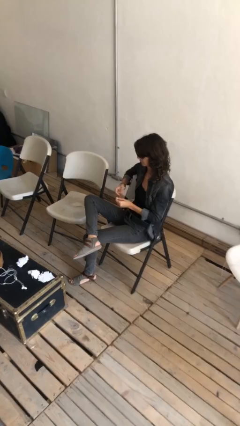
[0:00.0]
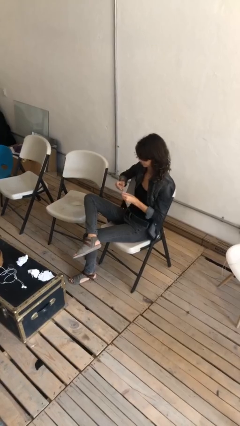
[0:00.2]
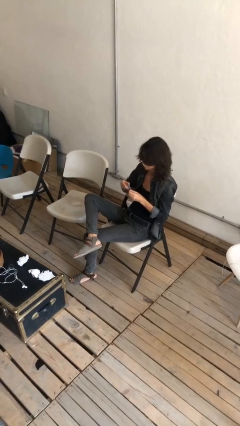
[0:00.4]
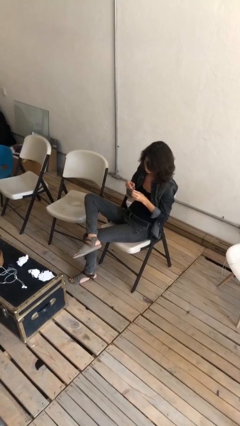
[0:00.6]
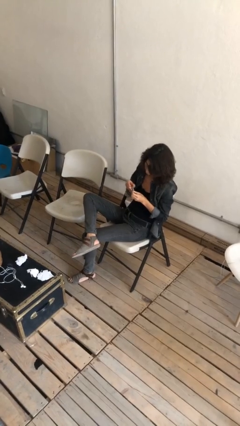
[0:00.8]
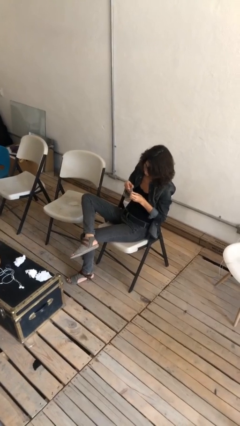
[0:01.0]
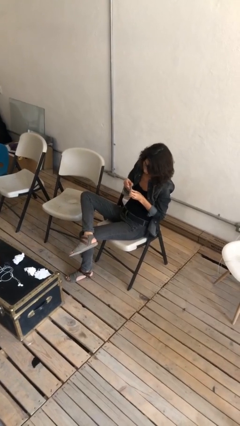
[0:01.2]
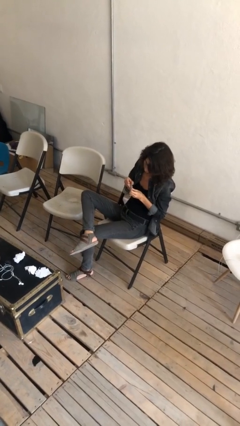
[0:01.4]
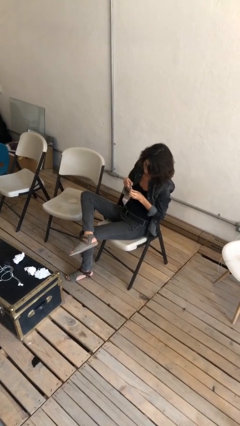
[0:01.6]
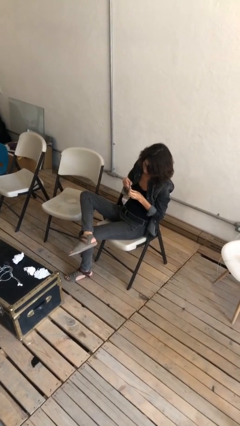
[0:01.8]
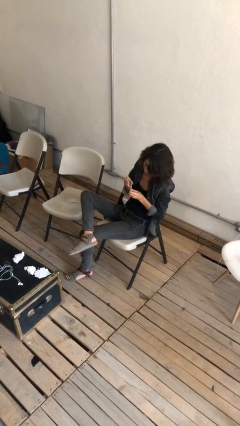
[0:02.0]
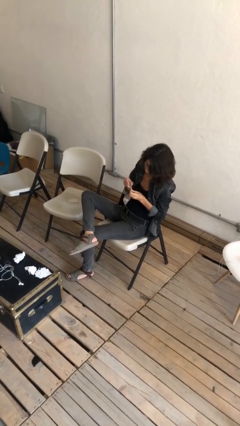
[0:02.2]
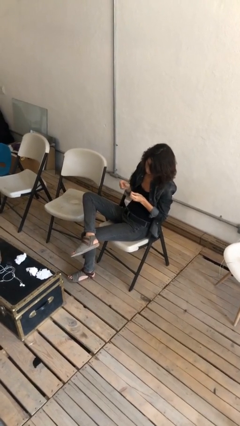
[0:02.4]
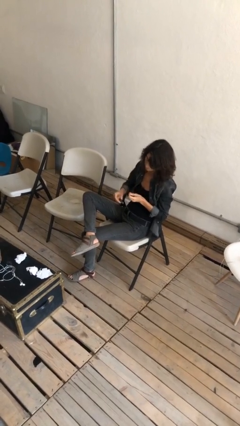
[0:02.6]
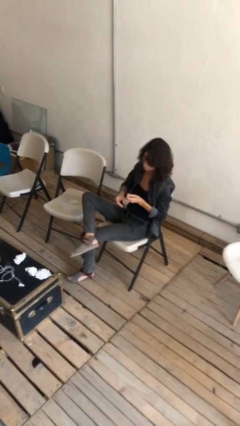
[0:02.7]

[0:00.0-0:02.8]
person clips fingernails

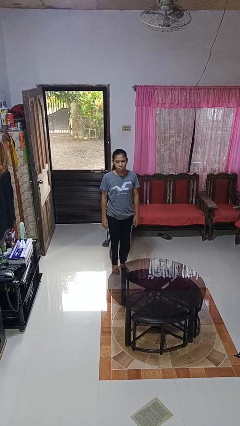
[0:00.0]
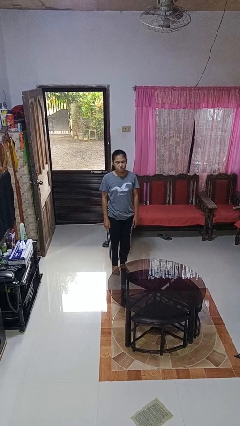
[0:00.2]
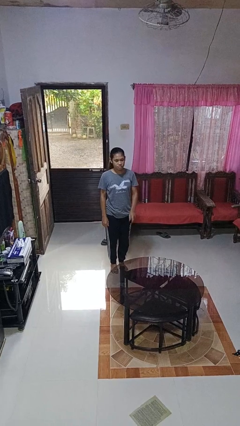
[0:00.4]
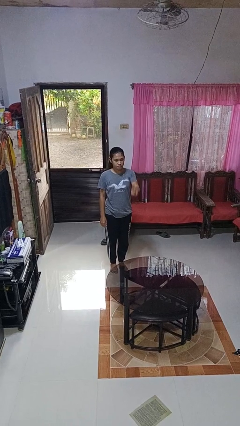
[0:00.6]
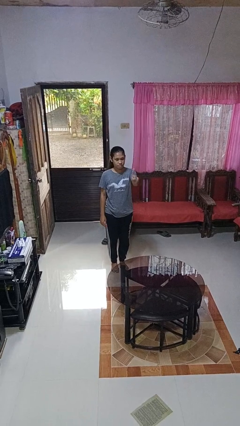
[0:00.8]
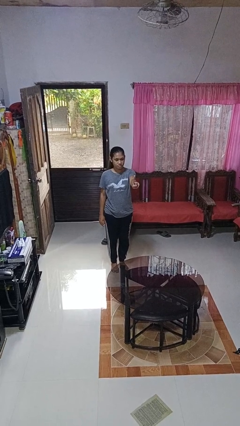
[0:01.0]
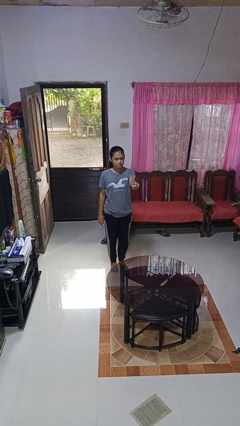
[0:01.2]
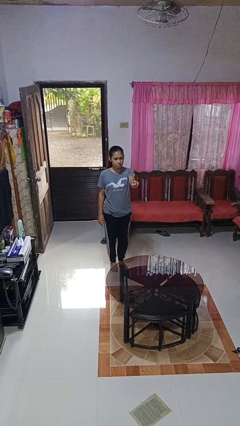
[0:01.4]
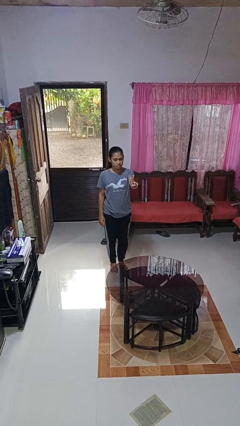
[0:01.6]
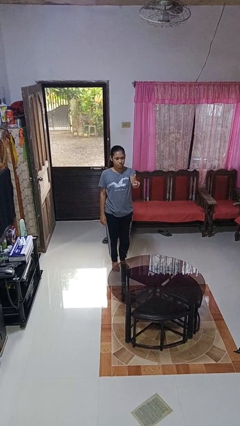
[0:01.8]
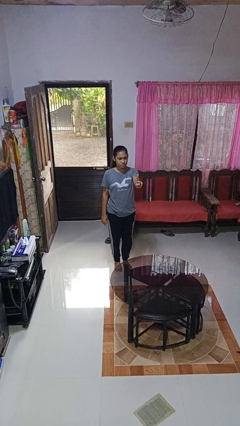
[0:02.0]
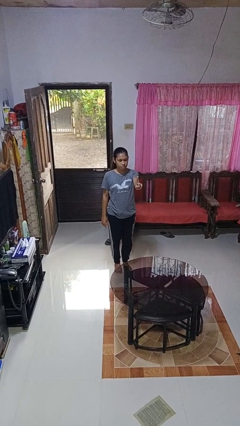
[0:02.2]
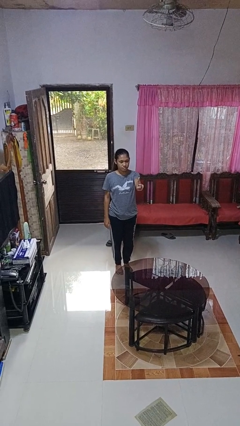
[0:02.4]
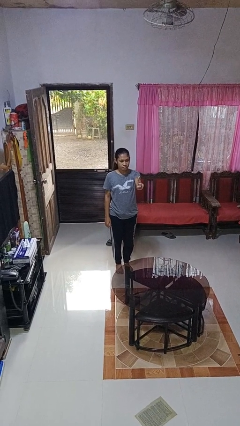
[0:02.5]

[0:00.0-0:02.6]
person gestures number one

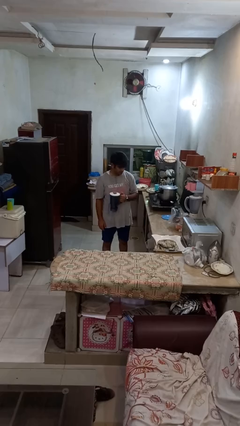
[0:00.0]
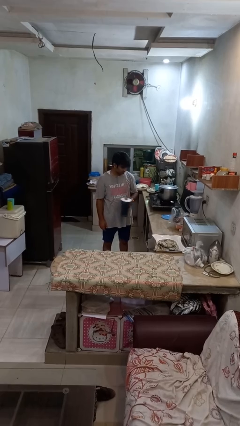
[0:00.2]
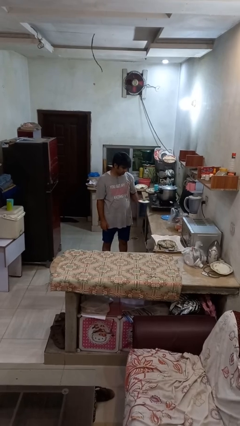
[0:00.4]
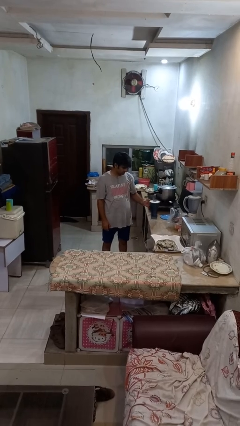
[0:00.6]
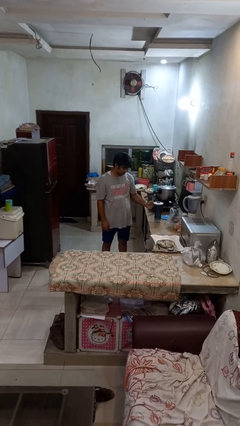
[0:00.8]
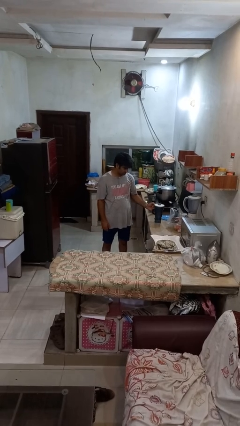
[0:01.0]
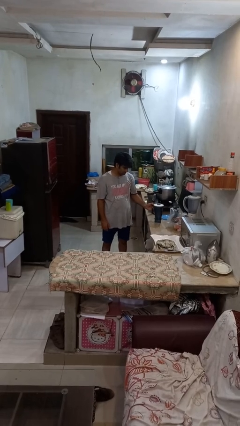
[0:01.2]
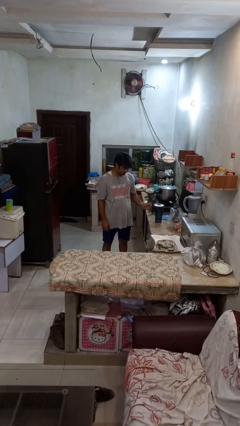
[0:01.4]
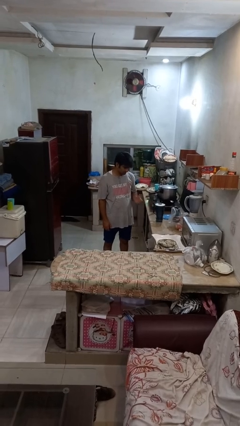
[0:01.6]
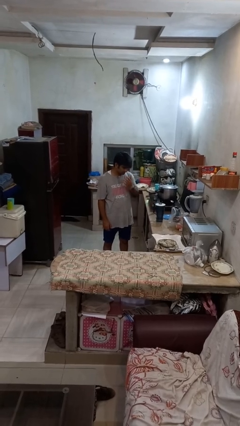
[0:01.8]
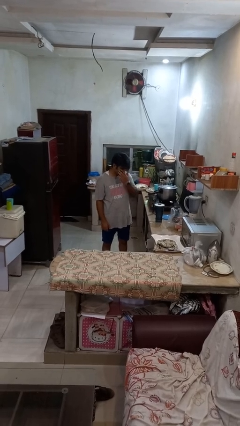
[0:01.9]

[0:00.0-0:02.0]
person puts down object on countertop

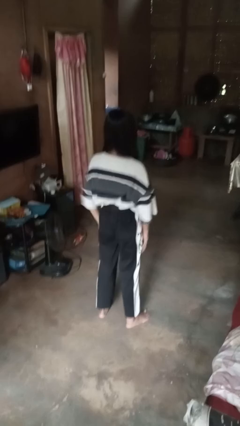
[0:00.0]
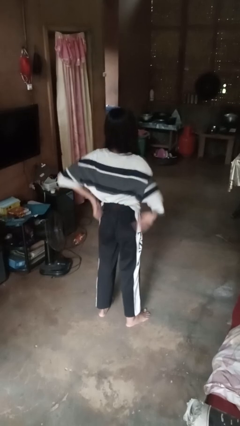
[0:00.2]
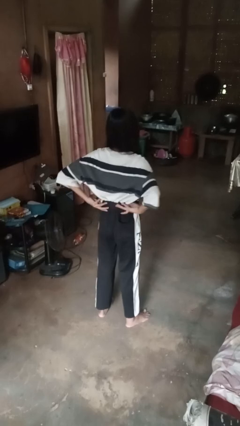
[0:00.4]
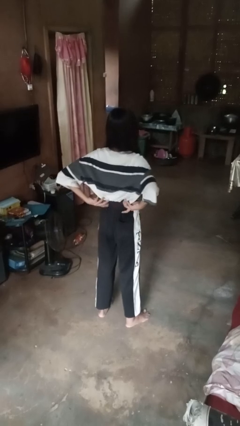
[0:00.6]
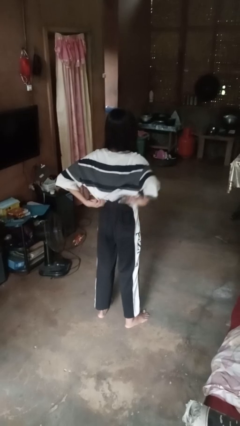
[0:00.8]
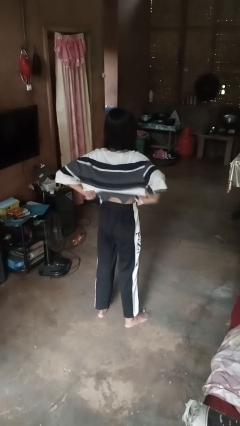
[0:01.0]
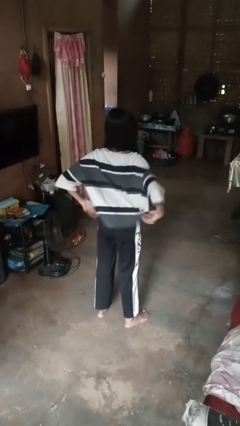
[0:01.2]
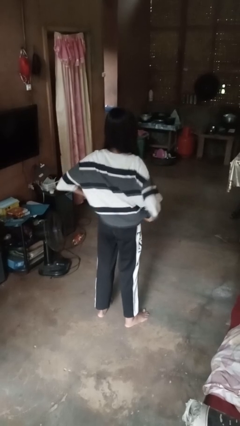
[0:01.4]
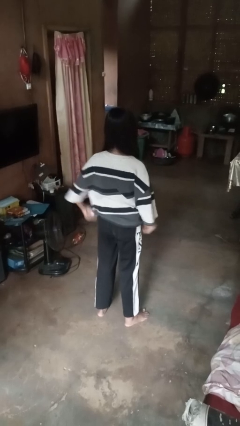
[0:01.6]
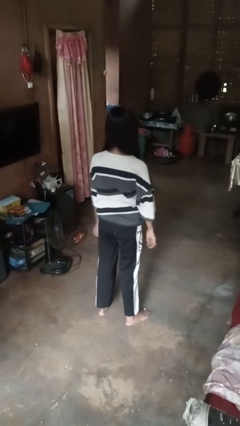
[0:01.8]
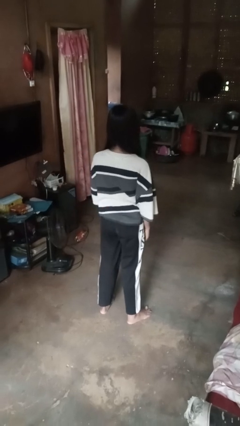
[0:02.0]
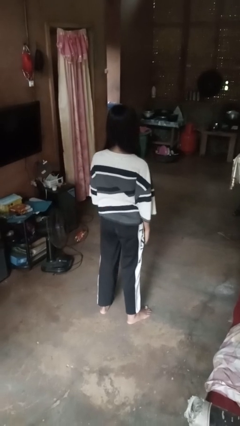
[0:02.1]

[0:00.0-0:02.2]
person untucks shirt

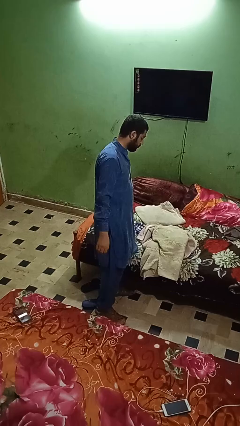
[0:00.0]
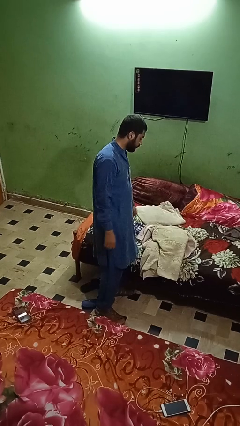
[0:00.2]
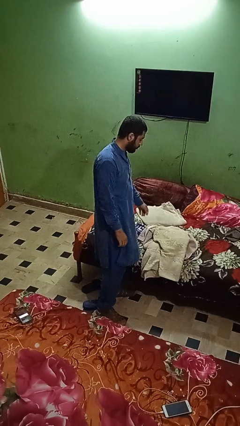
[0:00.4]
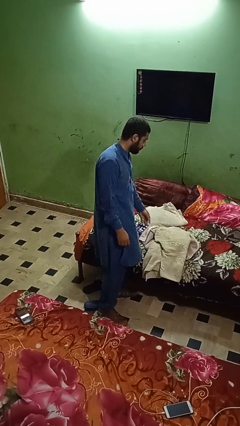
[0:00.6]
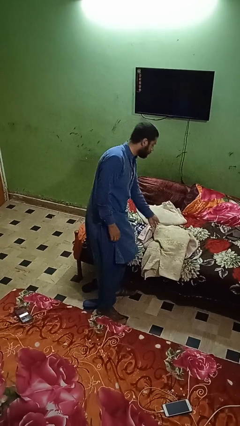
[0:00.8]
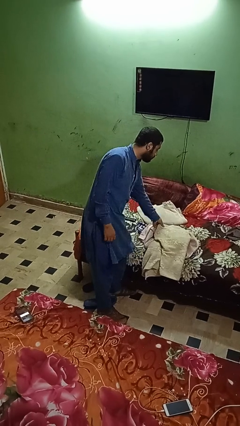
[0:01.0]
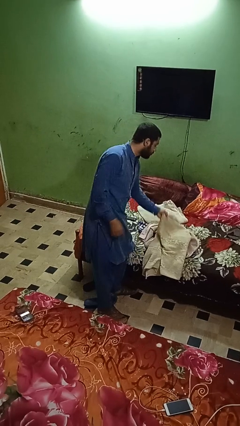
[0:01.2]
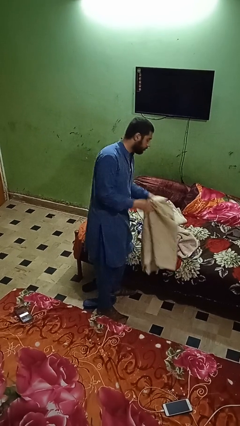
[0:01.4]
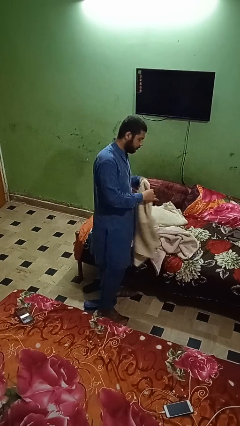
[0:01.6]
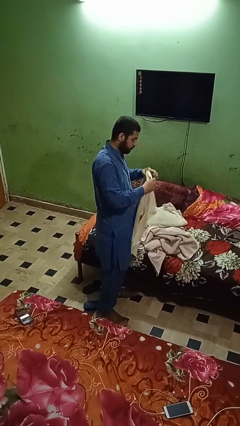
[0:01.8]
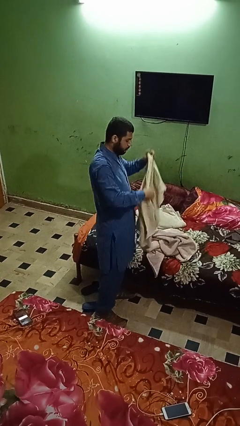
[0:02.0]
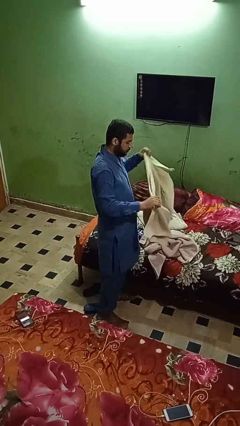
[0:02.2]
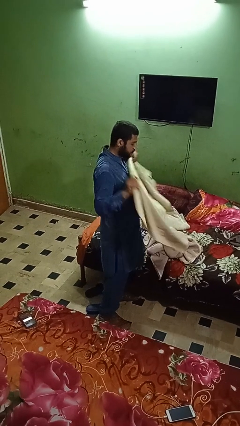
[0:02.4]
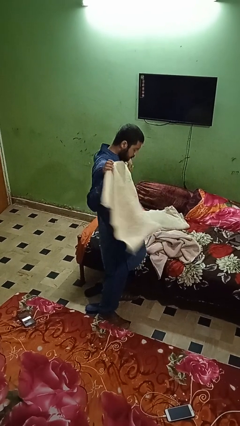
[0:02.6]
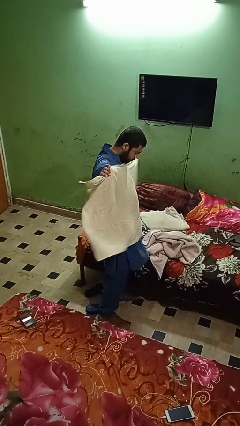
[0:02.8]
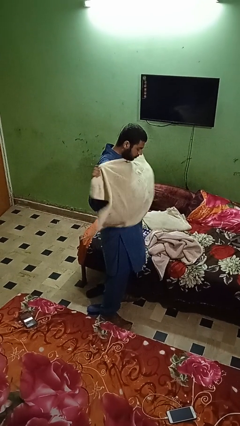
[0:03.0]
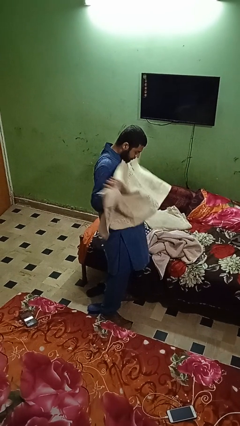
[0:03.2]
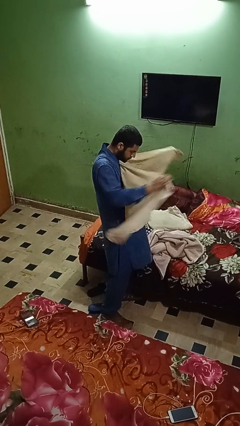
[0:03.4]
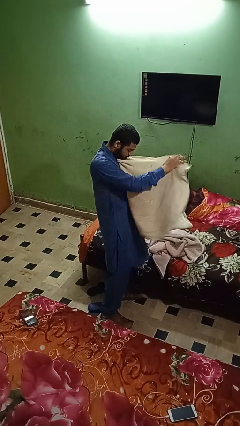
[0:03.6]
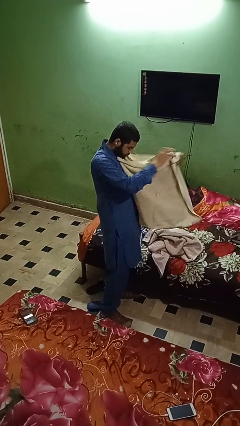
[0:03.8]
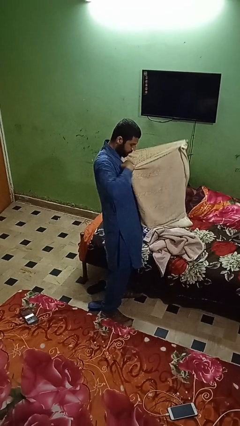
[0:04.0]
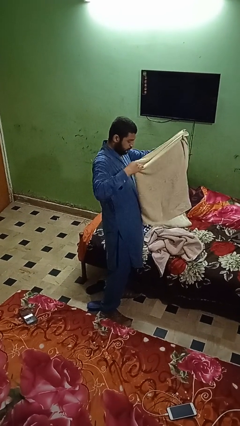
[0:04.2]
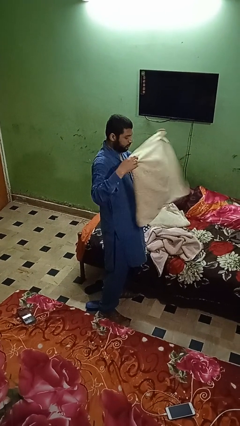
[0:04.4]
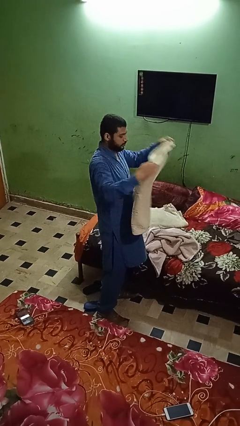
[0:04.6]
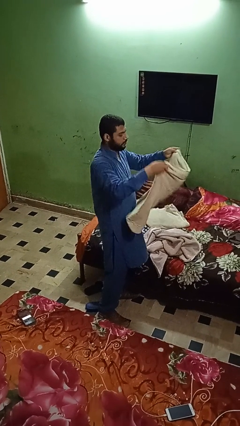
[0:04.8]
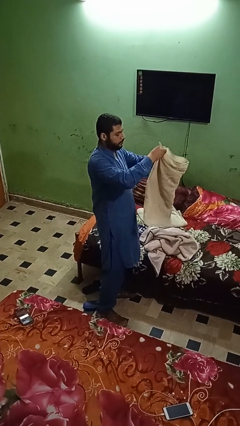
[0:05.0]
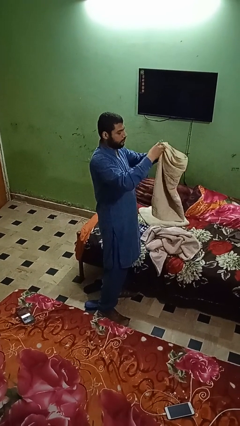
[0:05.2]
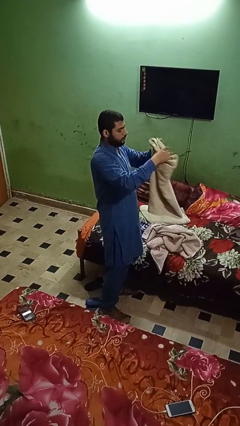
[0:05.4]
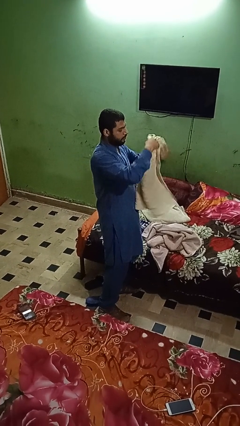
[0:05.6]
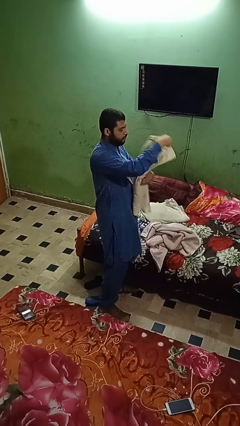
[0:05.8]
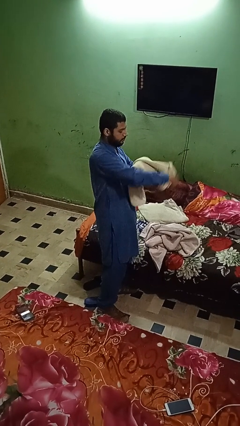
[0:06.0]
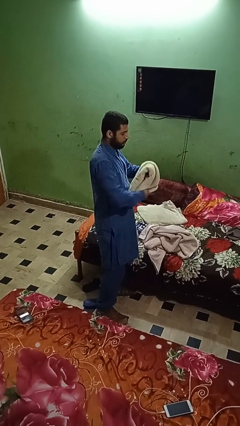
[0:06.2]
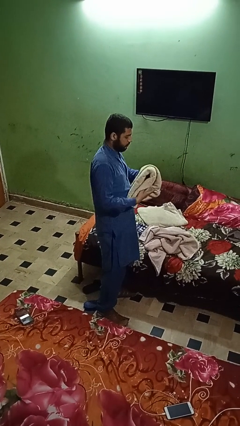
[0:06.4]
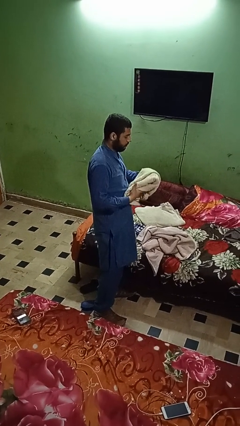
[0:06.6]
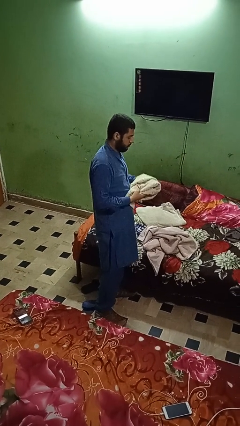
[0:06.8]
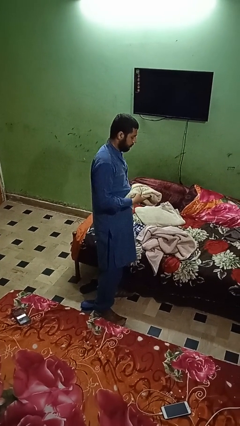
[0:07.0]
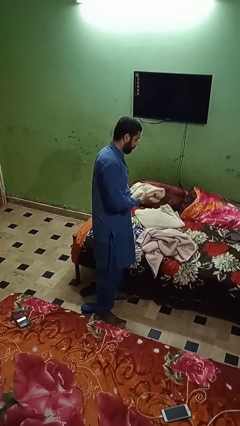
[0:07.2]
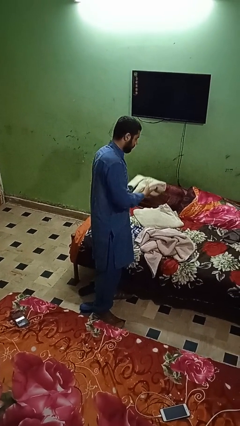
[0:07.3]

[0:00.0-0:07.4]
person folds towel

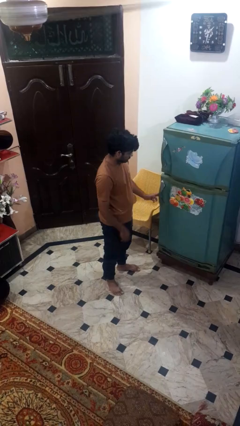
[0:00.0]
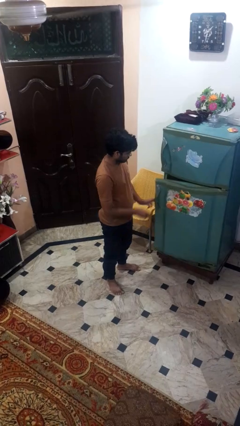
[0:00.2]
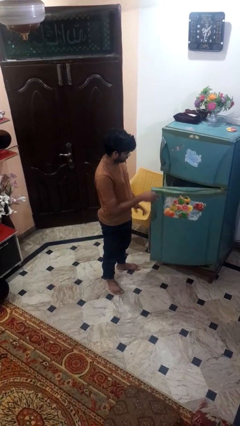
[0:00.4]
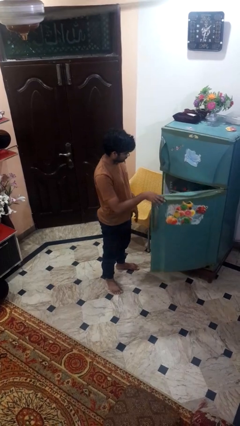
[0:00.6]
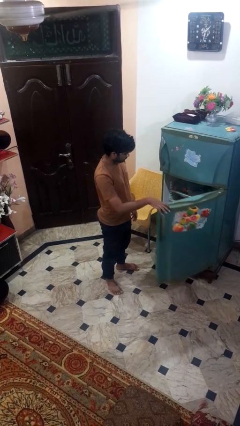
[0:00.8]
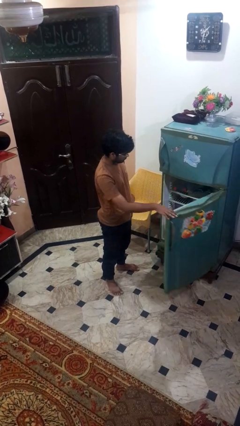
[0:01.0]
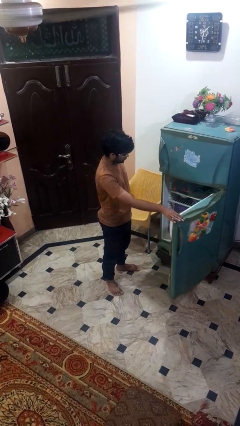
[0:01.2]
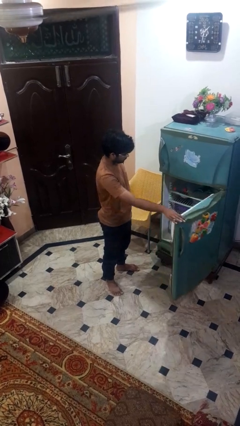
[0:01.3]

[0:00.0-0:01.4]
person opens refrigerator
